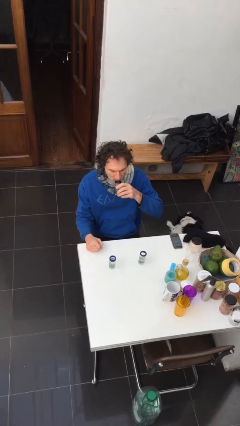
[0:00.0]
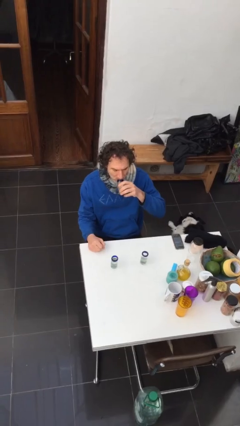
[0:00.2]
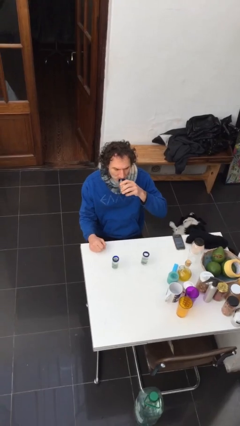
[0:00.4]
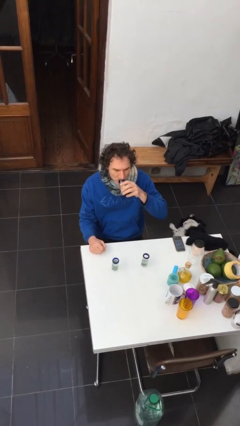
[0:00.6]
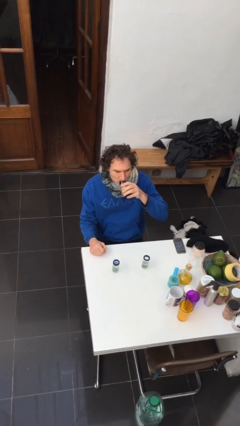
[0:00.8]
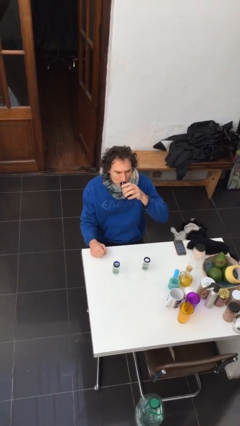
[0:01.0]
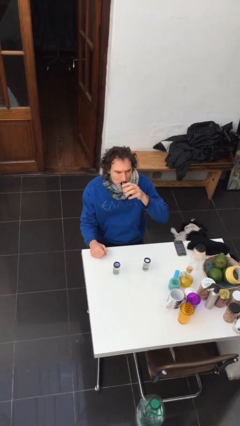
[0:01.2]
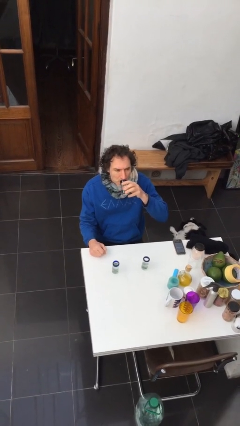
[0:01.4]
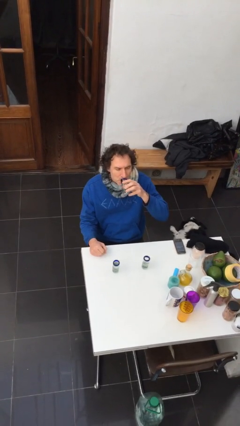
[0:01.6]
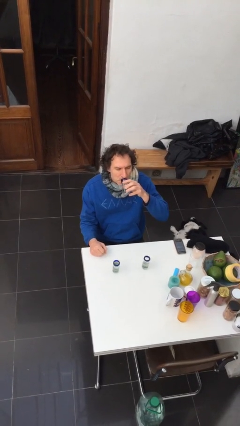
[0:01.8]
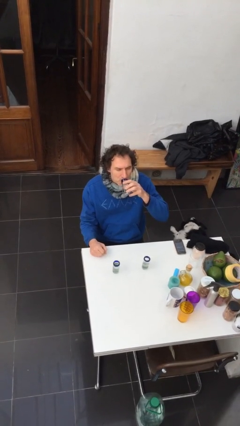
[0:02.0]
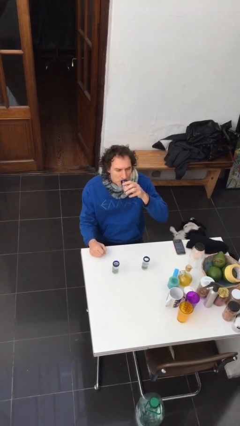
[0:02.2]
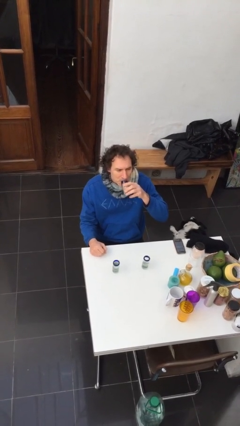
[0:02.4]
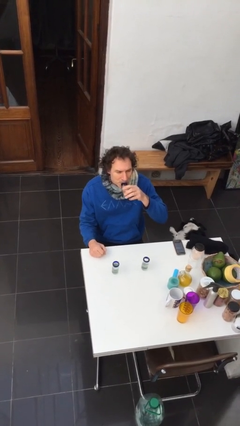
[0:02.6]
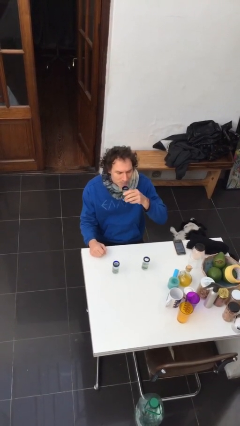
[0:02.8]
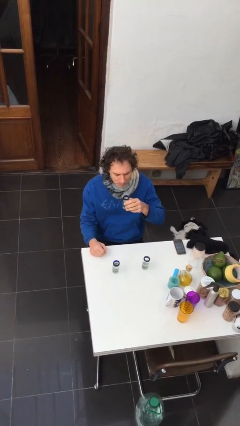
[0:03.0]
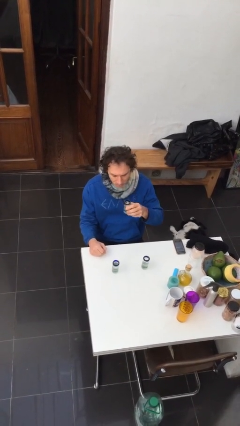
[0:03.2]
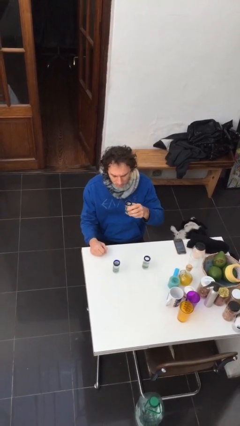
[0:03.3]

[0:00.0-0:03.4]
person drinks from shotglass

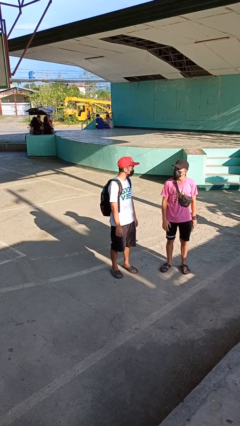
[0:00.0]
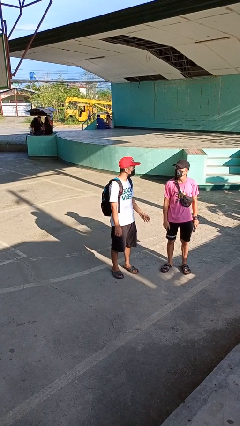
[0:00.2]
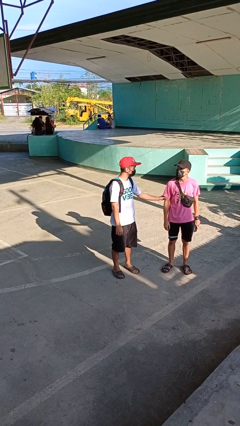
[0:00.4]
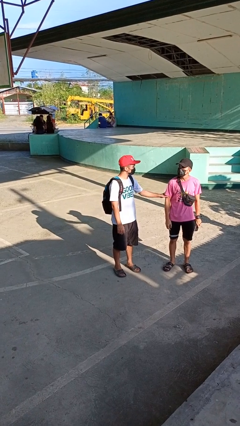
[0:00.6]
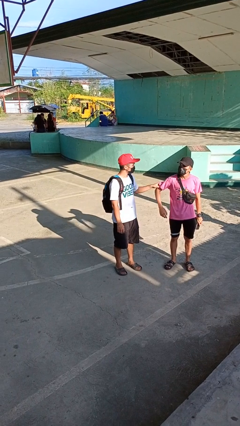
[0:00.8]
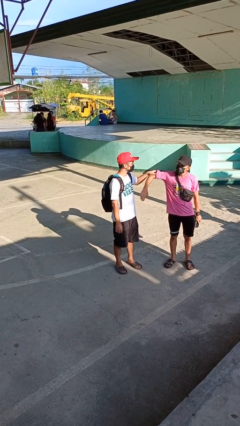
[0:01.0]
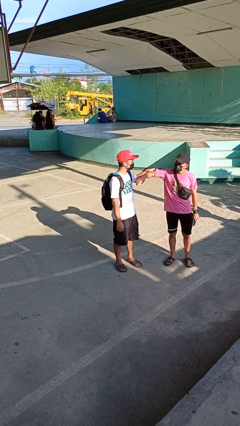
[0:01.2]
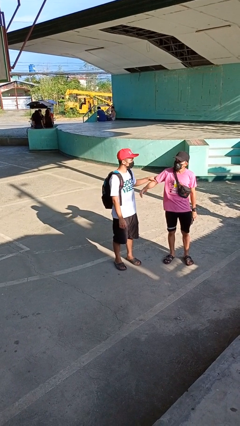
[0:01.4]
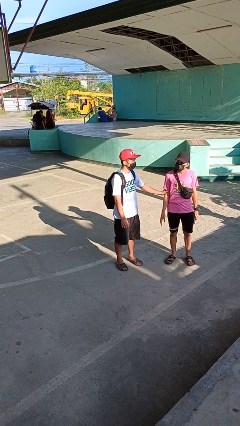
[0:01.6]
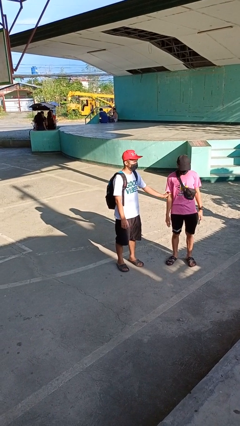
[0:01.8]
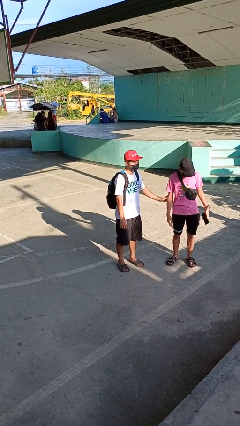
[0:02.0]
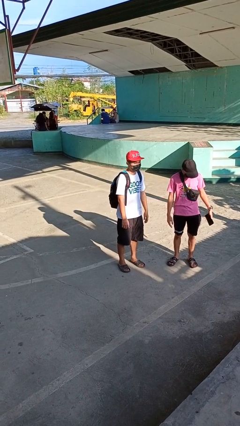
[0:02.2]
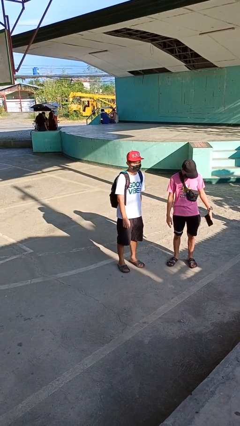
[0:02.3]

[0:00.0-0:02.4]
person grabs person by bicep

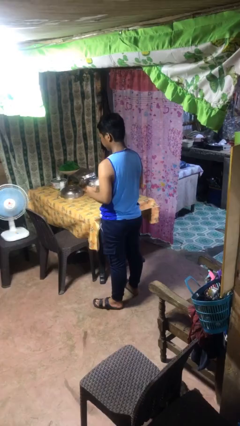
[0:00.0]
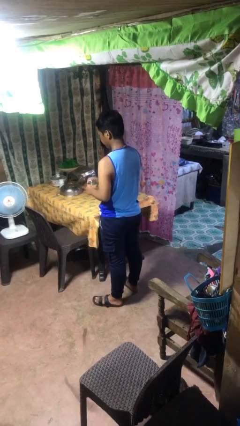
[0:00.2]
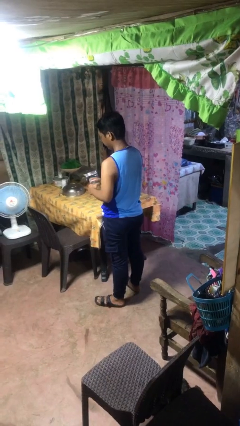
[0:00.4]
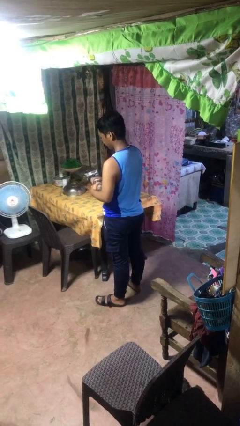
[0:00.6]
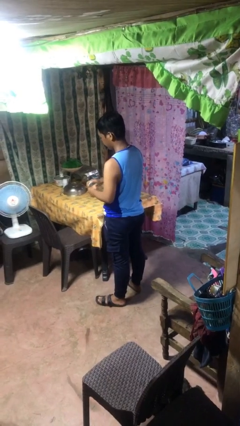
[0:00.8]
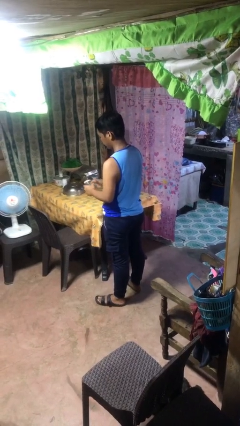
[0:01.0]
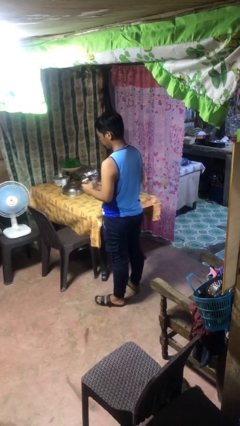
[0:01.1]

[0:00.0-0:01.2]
person closes jar

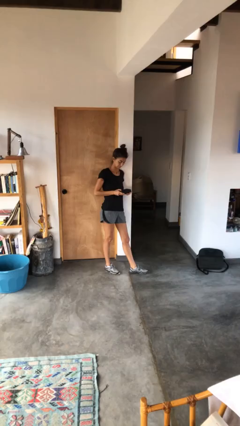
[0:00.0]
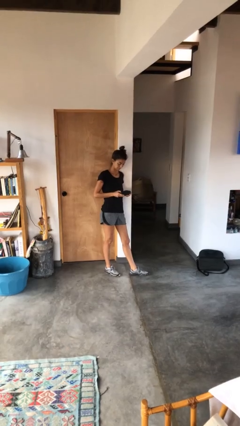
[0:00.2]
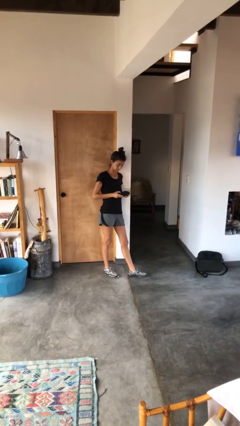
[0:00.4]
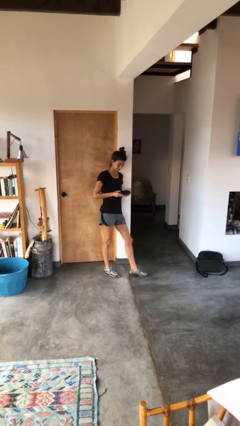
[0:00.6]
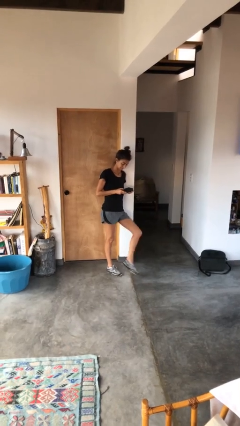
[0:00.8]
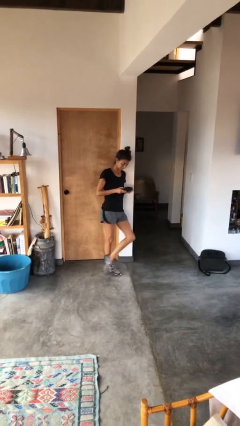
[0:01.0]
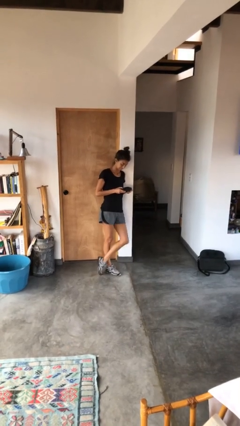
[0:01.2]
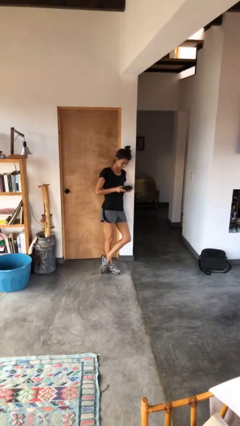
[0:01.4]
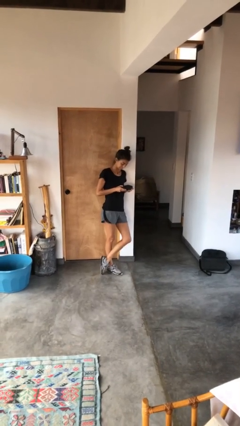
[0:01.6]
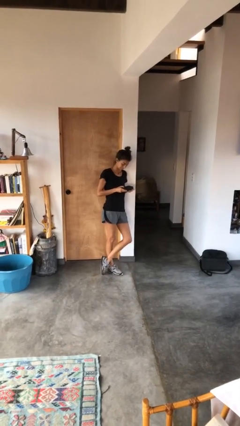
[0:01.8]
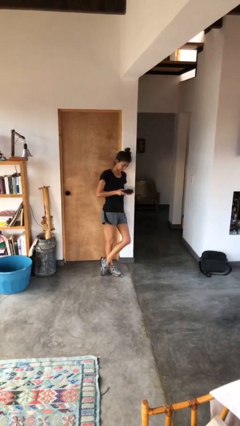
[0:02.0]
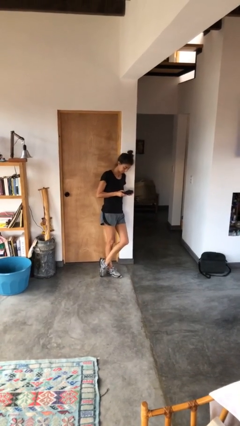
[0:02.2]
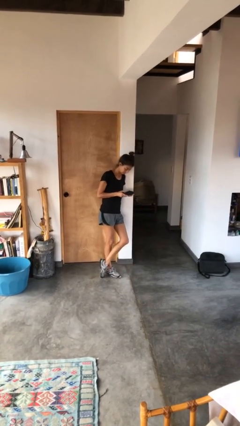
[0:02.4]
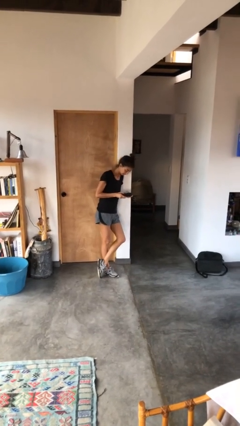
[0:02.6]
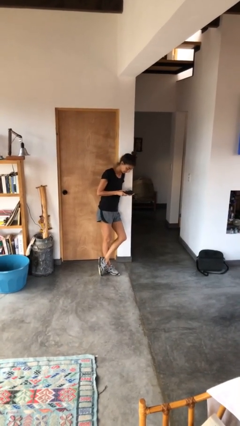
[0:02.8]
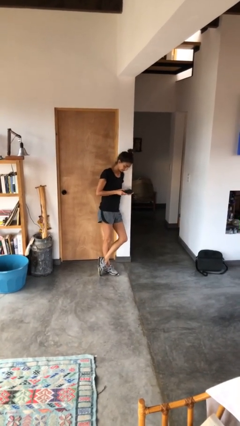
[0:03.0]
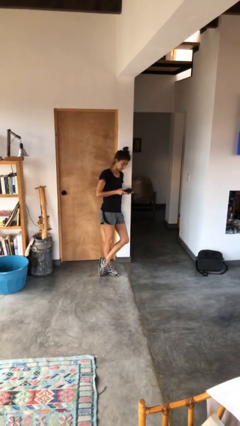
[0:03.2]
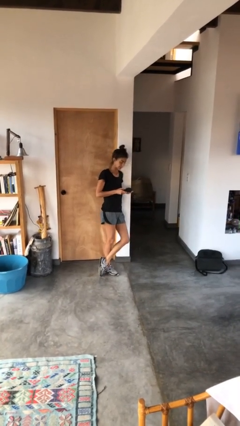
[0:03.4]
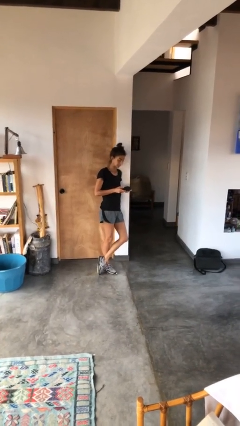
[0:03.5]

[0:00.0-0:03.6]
person interacts with handheld game

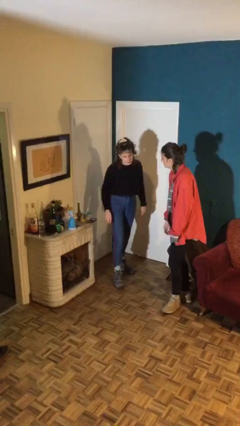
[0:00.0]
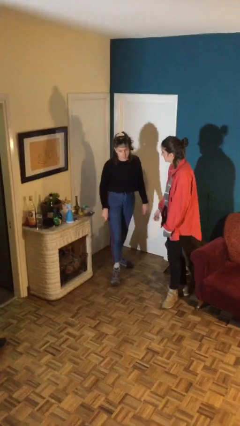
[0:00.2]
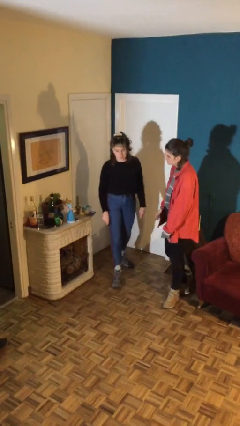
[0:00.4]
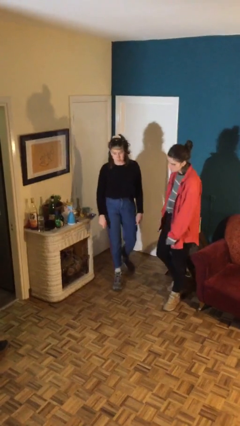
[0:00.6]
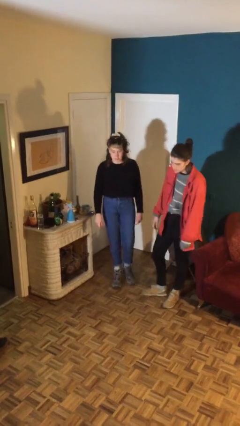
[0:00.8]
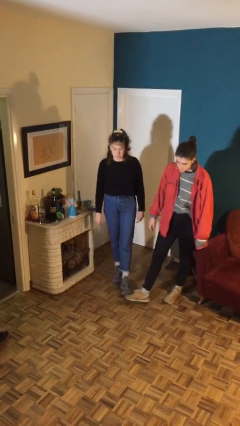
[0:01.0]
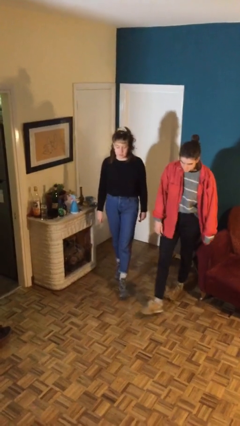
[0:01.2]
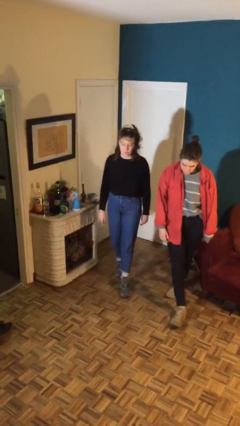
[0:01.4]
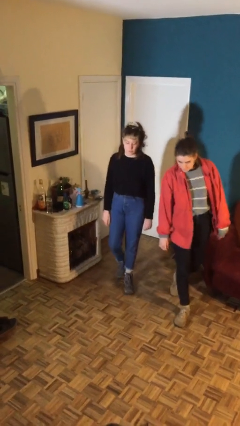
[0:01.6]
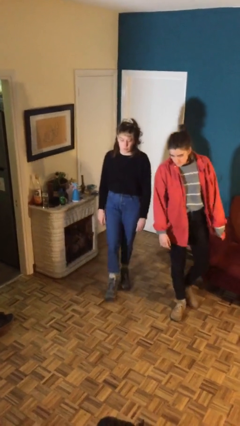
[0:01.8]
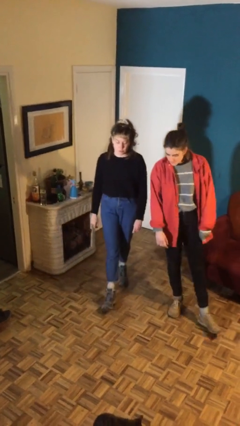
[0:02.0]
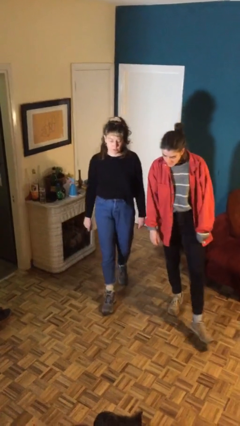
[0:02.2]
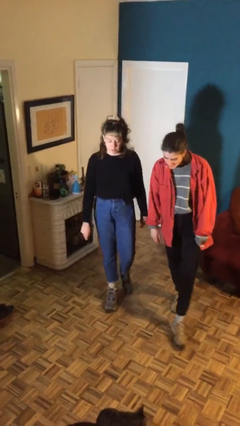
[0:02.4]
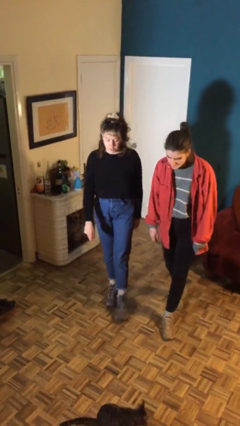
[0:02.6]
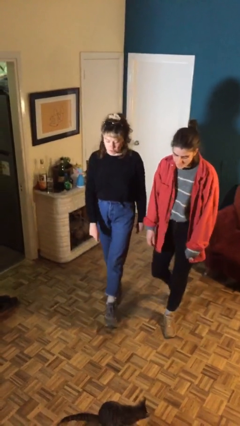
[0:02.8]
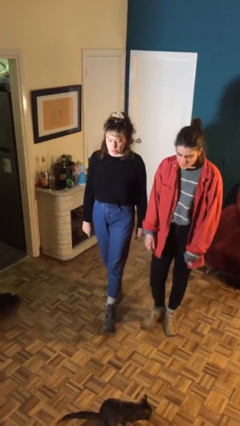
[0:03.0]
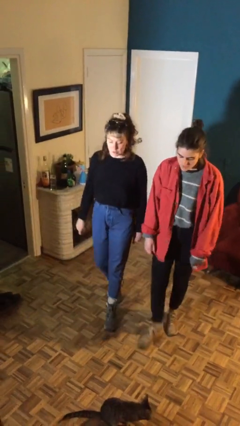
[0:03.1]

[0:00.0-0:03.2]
person talks to person

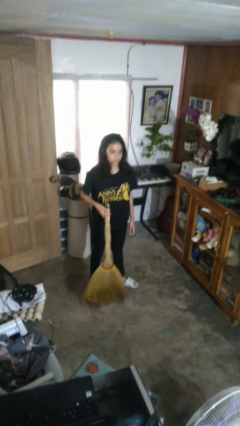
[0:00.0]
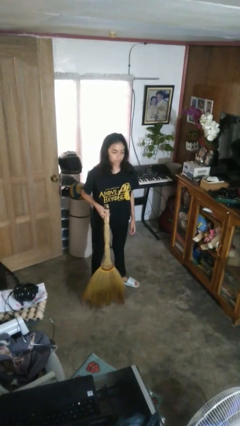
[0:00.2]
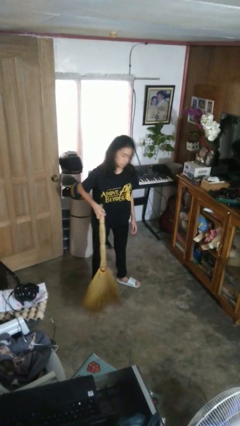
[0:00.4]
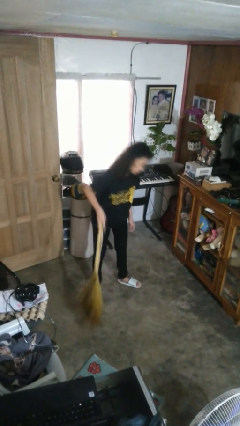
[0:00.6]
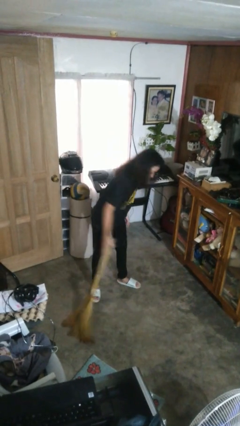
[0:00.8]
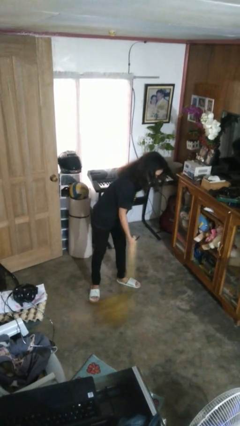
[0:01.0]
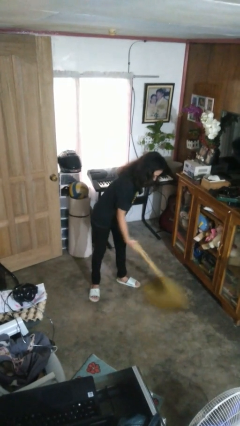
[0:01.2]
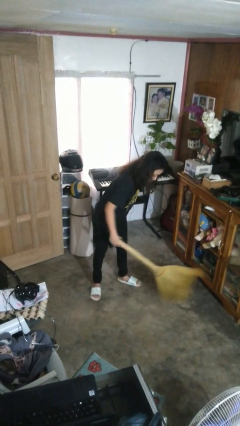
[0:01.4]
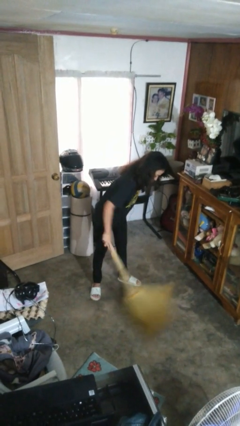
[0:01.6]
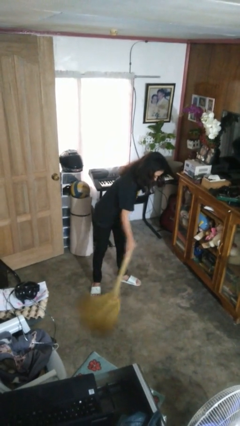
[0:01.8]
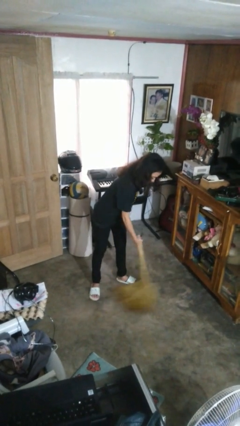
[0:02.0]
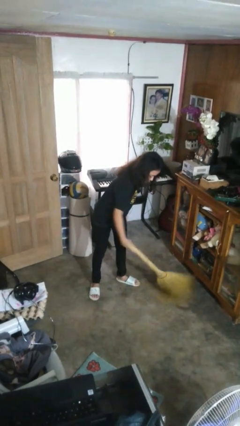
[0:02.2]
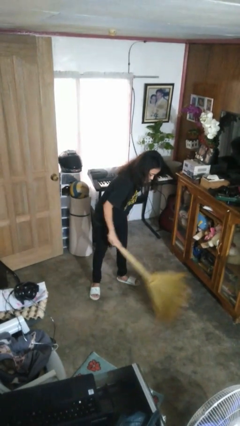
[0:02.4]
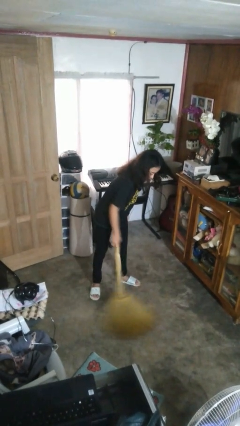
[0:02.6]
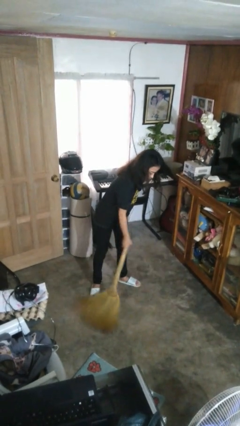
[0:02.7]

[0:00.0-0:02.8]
person sweeps floor

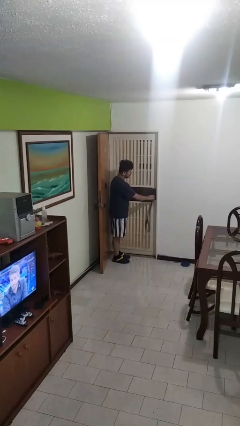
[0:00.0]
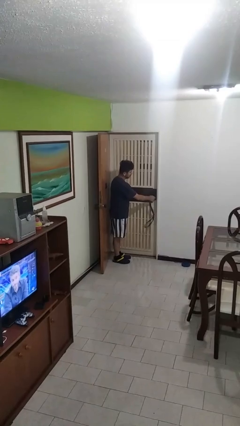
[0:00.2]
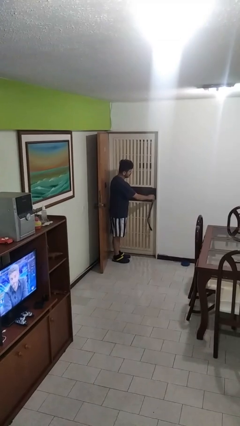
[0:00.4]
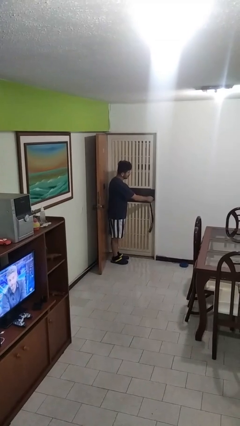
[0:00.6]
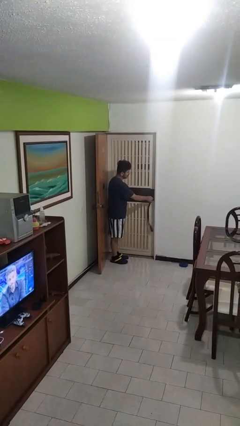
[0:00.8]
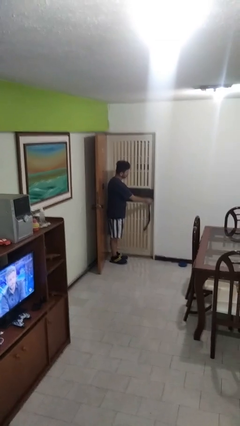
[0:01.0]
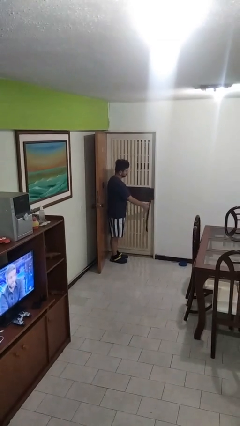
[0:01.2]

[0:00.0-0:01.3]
person locks door with keys
